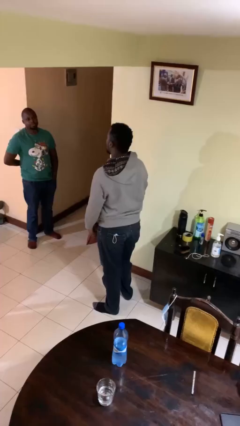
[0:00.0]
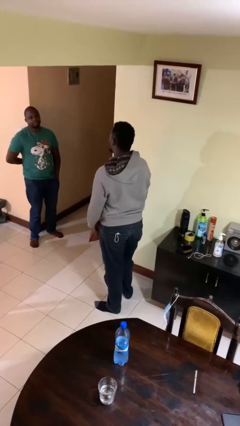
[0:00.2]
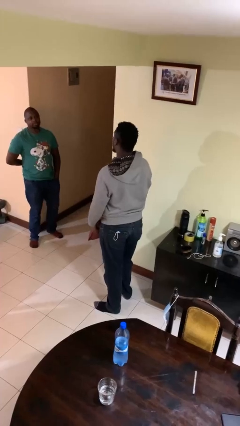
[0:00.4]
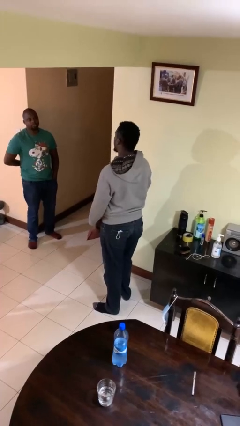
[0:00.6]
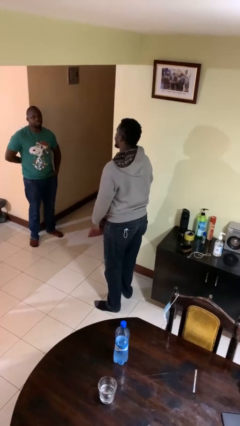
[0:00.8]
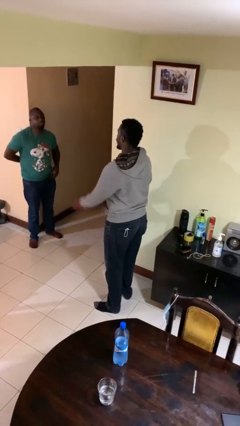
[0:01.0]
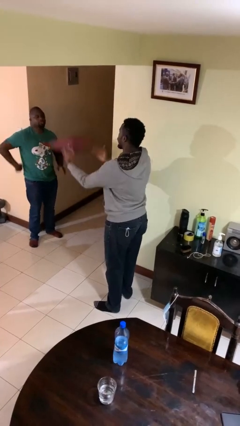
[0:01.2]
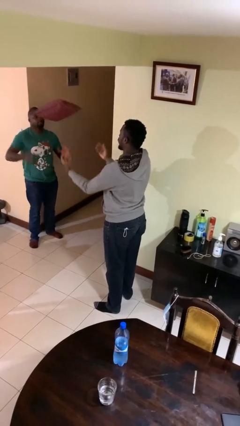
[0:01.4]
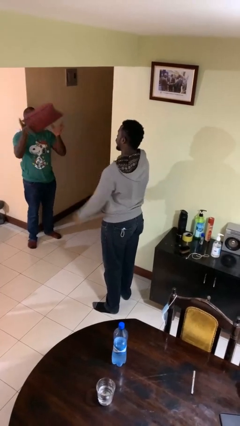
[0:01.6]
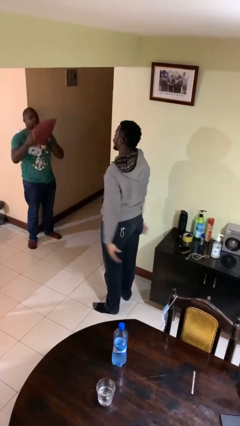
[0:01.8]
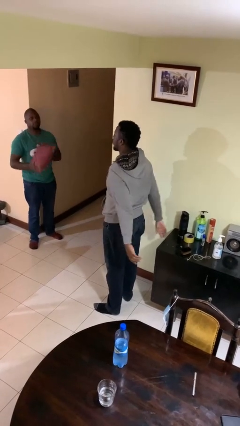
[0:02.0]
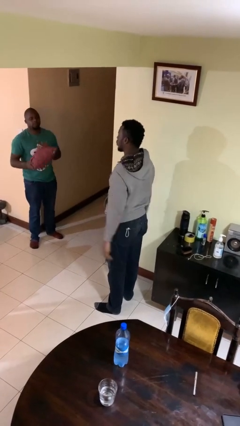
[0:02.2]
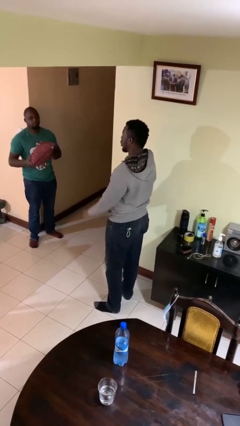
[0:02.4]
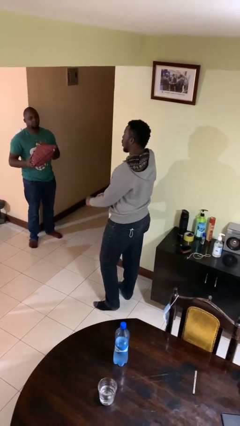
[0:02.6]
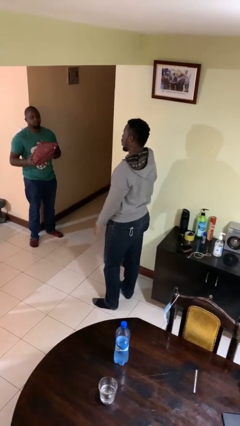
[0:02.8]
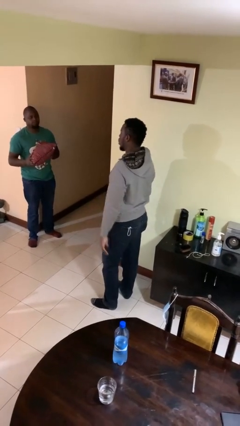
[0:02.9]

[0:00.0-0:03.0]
person throws object to person

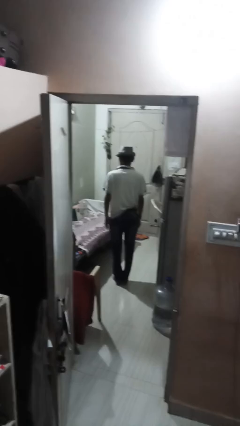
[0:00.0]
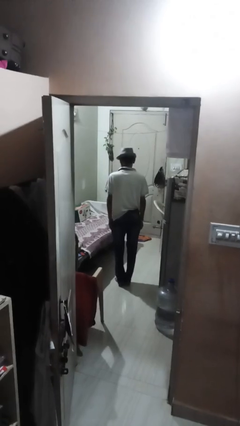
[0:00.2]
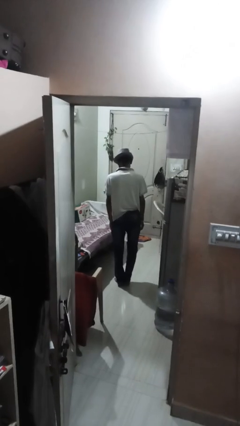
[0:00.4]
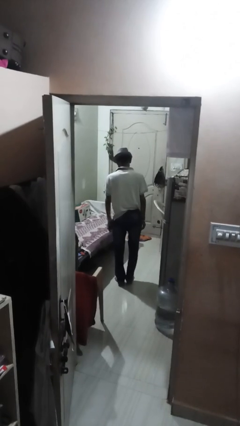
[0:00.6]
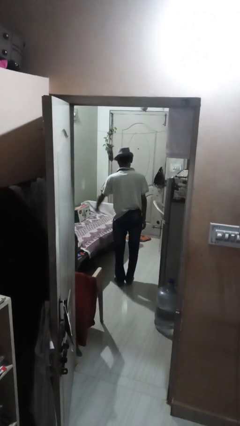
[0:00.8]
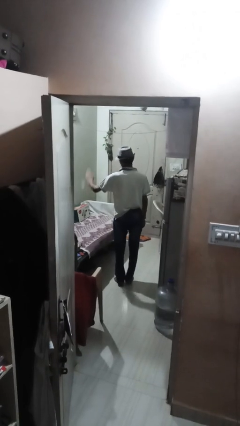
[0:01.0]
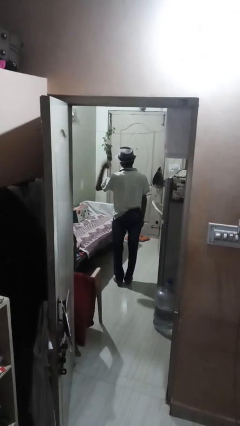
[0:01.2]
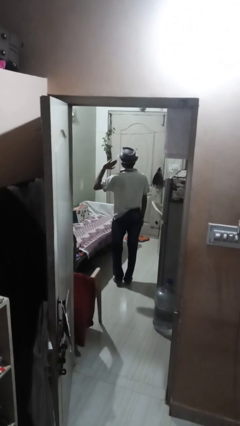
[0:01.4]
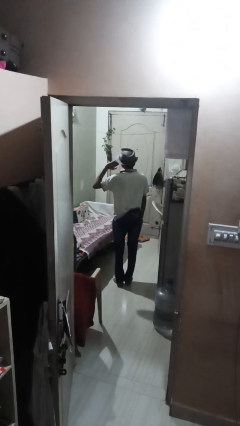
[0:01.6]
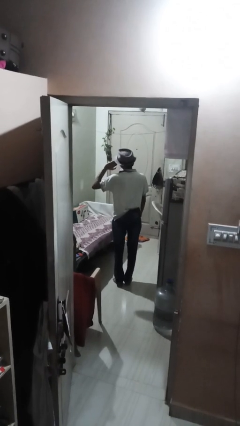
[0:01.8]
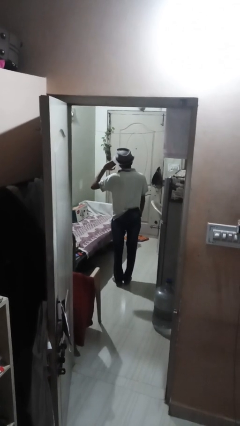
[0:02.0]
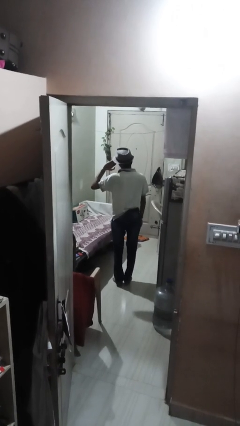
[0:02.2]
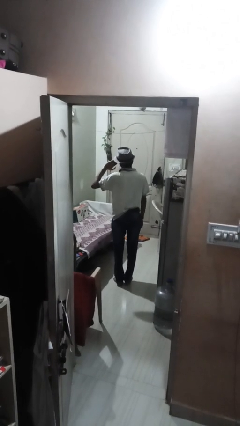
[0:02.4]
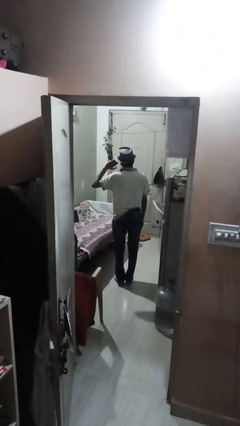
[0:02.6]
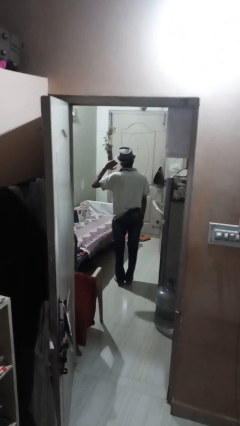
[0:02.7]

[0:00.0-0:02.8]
person salutes

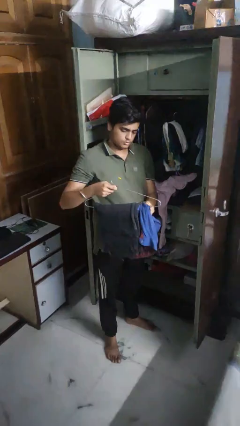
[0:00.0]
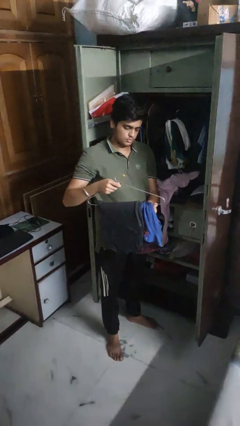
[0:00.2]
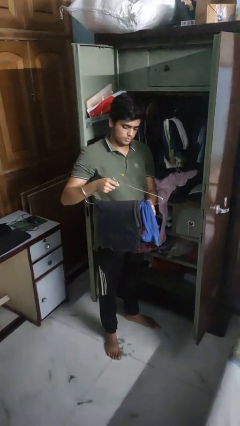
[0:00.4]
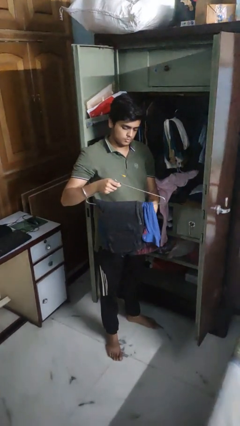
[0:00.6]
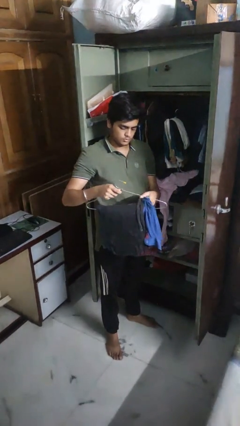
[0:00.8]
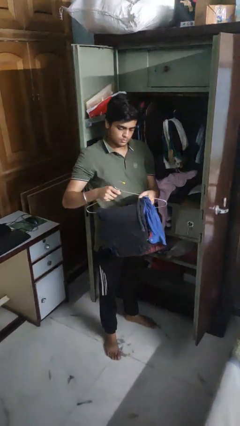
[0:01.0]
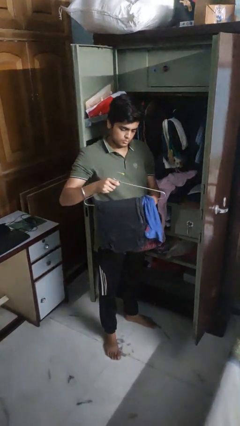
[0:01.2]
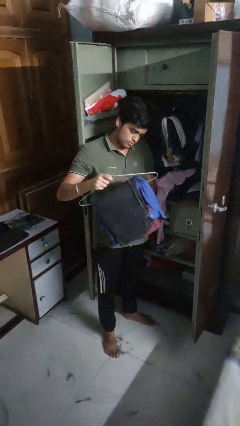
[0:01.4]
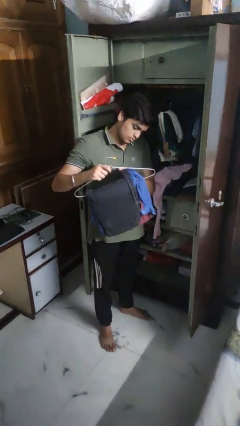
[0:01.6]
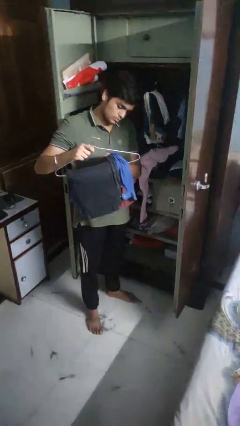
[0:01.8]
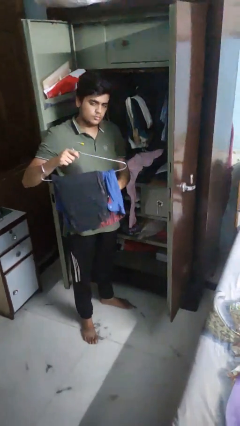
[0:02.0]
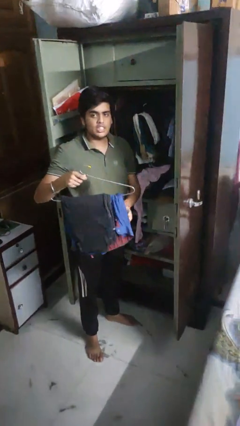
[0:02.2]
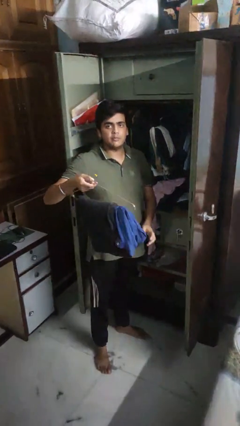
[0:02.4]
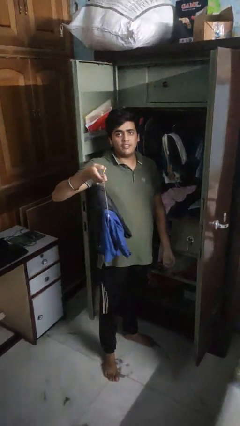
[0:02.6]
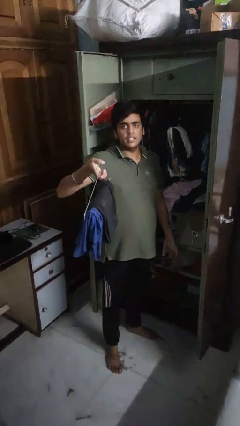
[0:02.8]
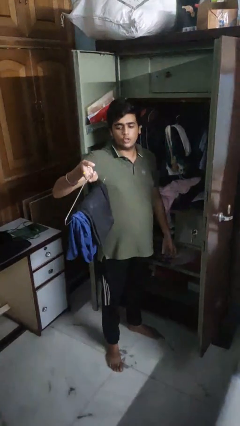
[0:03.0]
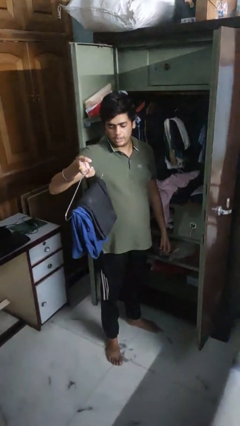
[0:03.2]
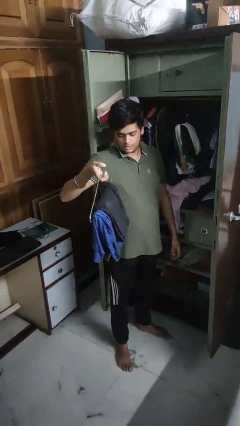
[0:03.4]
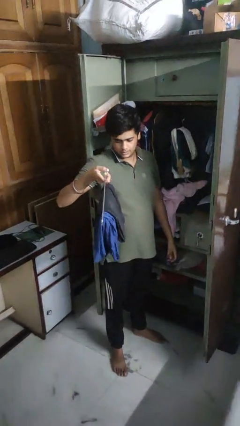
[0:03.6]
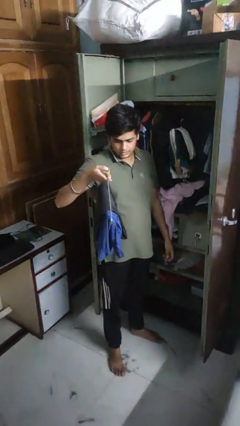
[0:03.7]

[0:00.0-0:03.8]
person takes clothes from closet

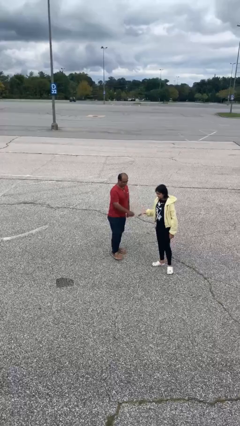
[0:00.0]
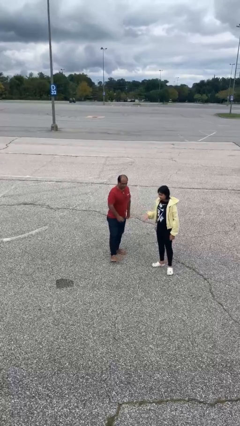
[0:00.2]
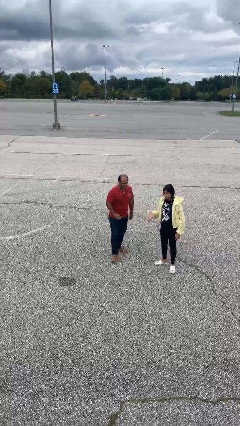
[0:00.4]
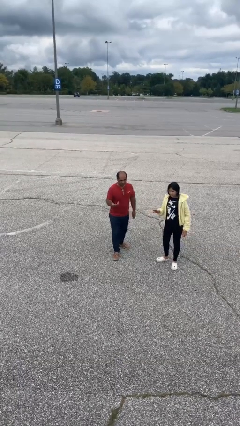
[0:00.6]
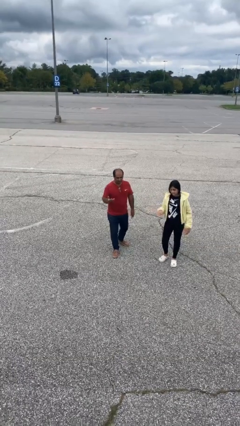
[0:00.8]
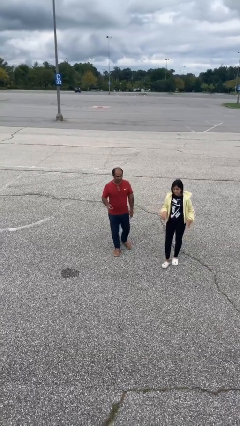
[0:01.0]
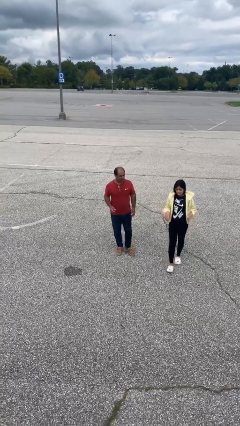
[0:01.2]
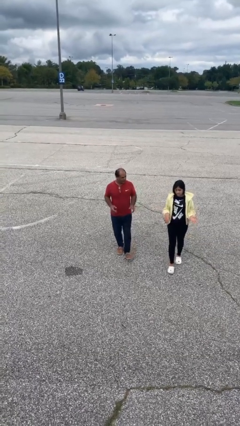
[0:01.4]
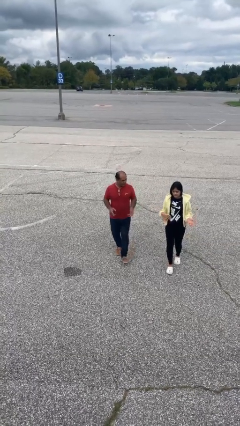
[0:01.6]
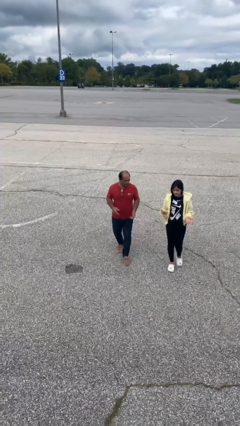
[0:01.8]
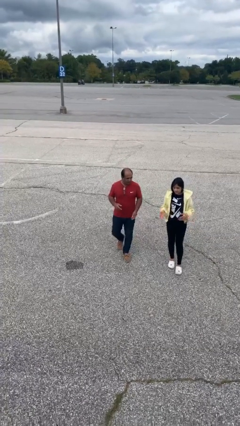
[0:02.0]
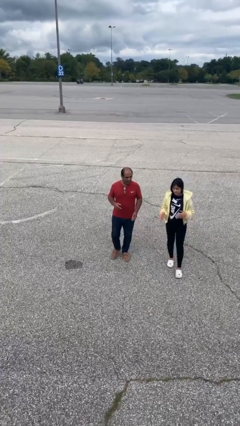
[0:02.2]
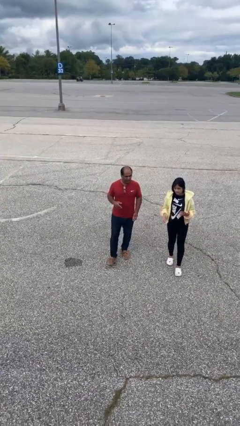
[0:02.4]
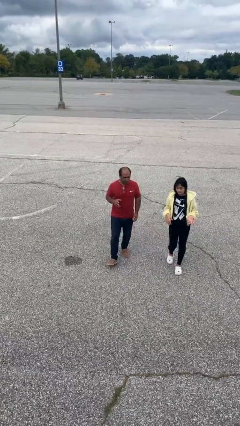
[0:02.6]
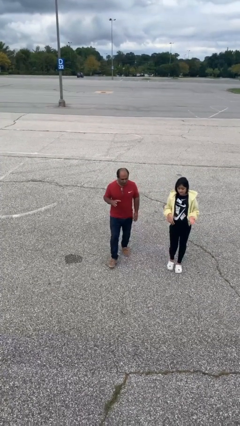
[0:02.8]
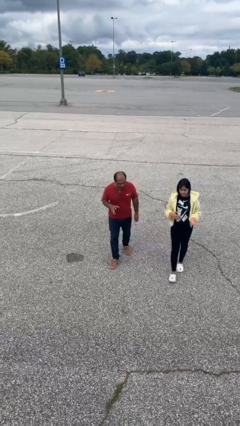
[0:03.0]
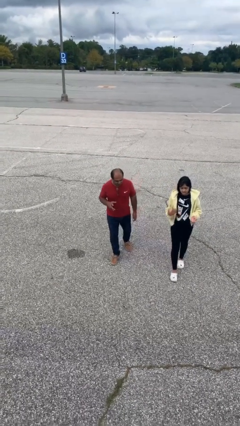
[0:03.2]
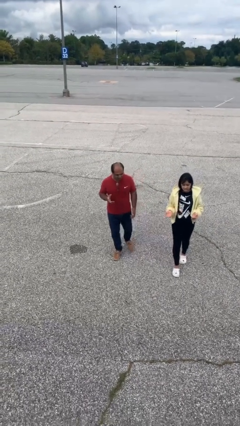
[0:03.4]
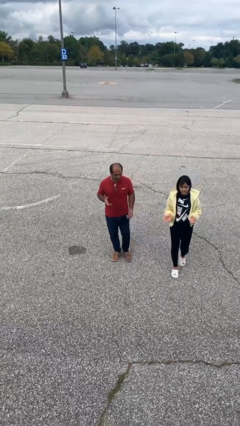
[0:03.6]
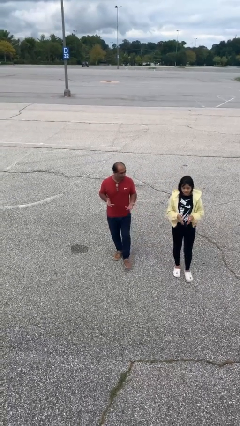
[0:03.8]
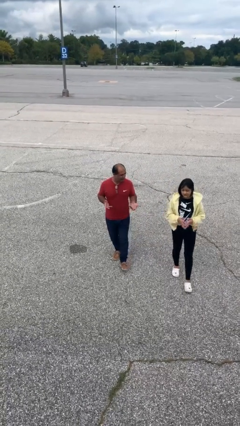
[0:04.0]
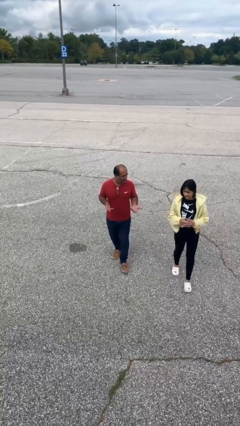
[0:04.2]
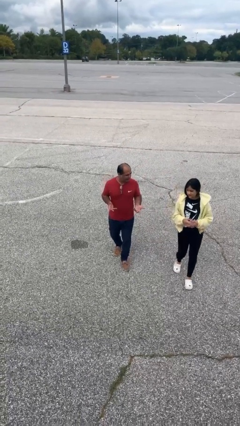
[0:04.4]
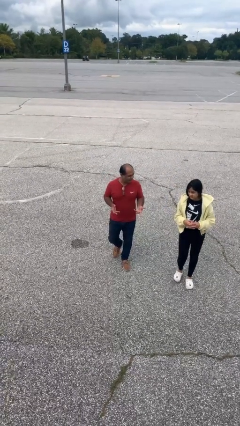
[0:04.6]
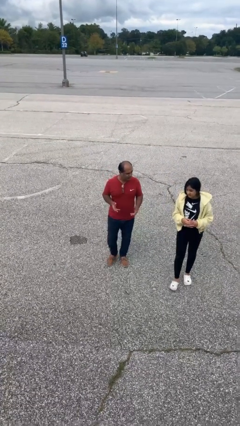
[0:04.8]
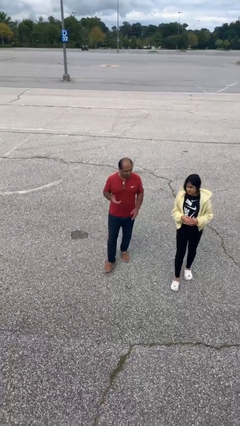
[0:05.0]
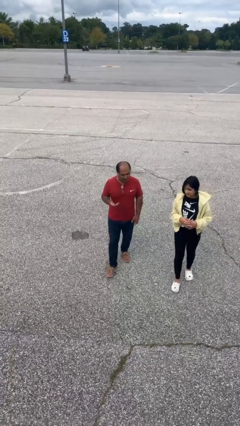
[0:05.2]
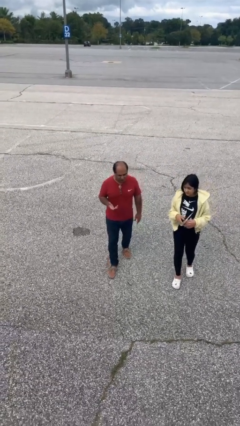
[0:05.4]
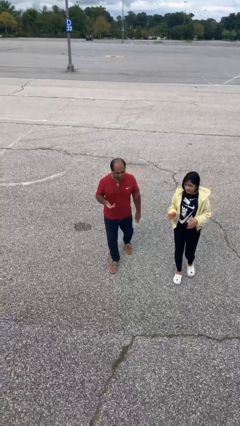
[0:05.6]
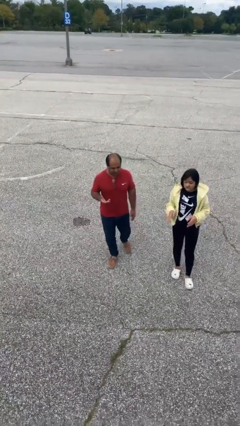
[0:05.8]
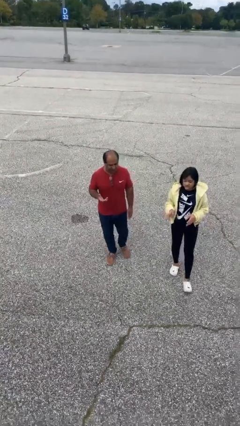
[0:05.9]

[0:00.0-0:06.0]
person talks to person

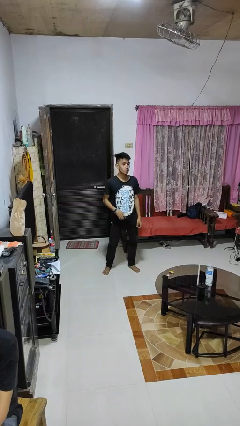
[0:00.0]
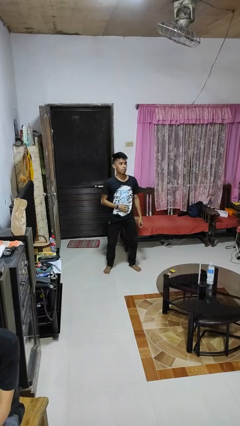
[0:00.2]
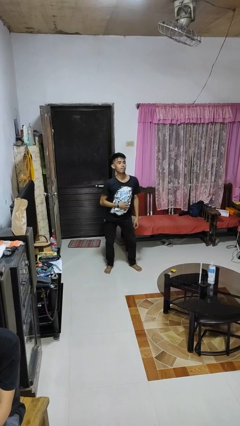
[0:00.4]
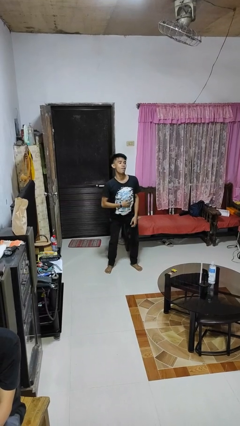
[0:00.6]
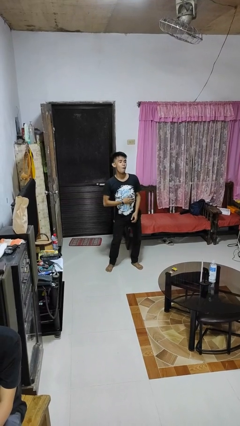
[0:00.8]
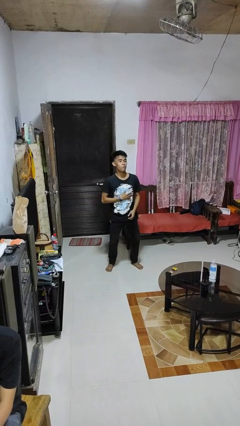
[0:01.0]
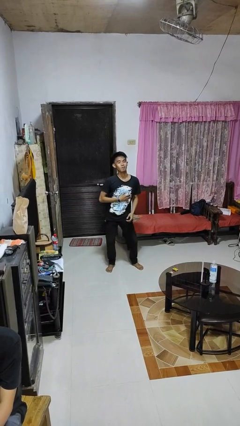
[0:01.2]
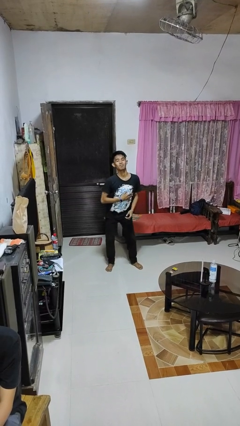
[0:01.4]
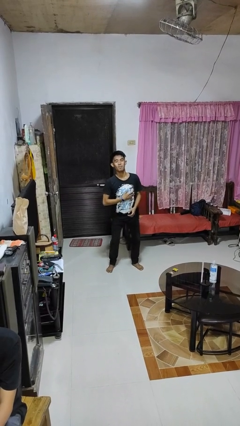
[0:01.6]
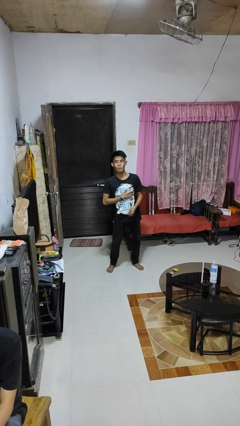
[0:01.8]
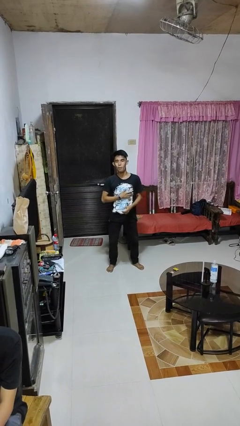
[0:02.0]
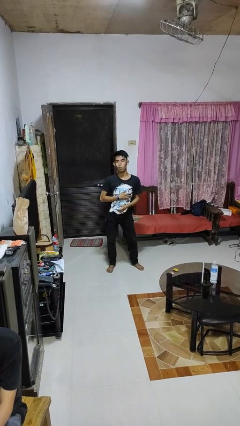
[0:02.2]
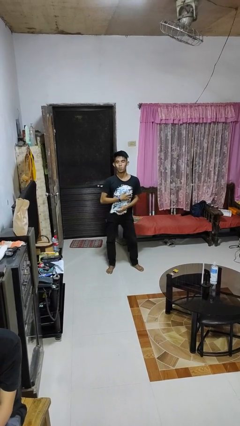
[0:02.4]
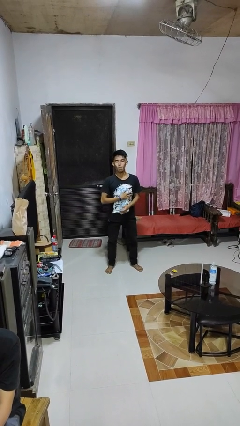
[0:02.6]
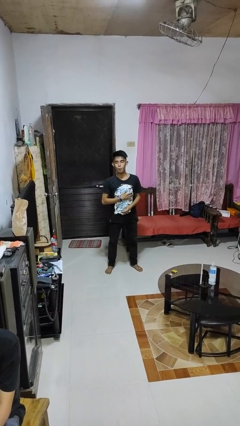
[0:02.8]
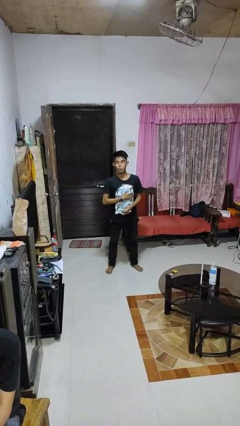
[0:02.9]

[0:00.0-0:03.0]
person wiggles hips
